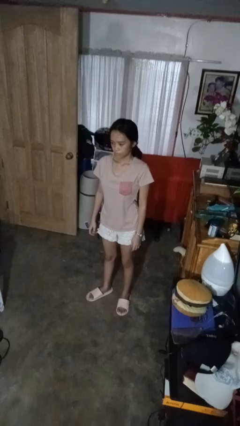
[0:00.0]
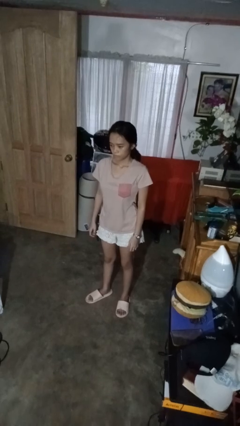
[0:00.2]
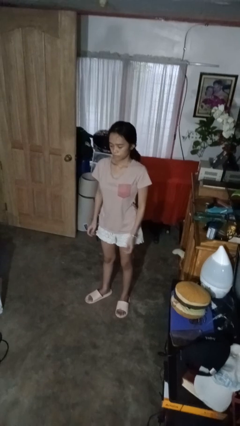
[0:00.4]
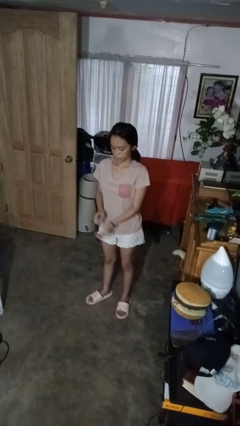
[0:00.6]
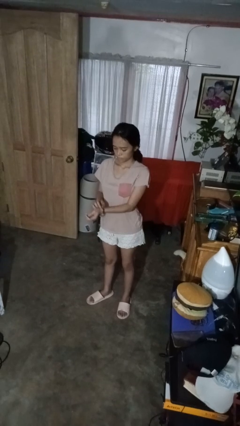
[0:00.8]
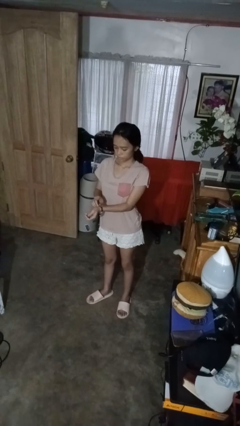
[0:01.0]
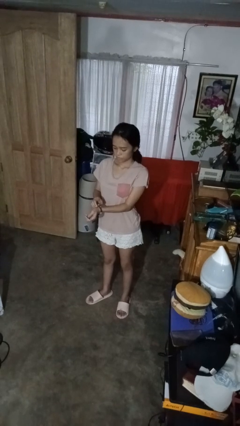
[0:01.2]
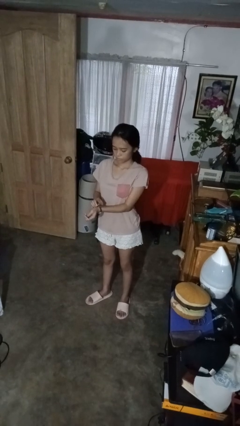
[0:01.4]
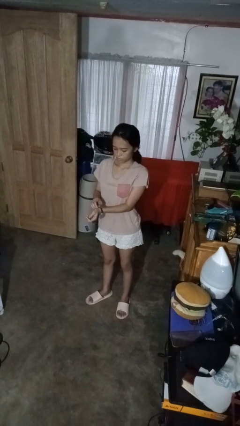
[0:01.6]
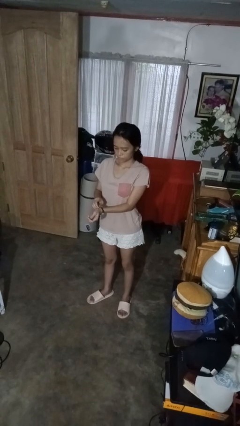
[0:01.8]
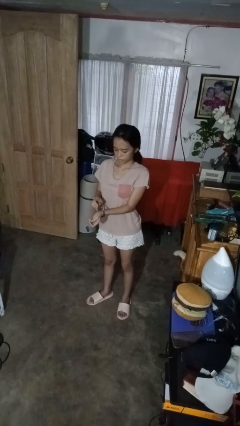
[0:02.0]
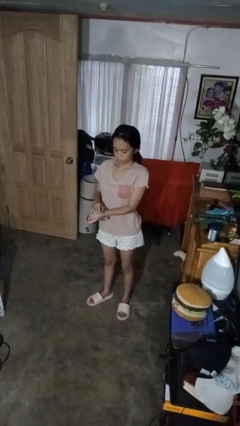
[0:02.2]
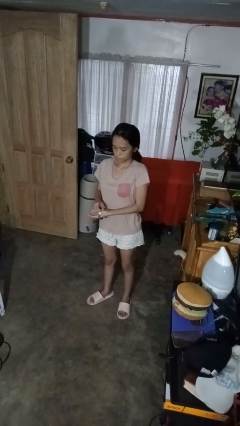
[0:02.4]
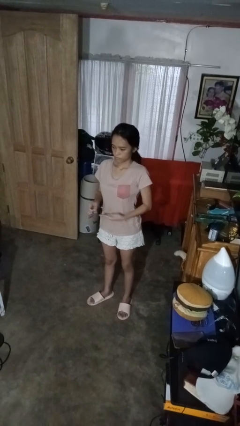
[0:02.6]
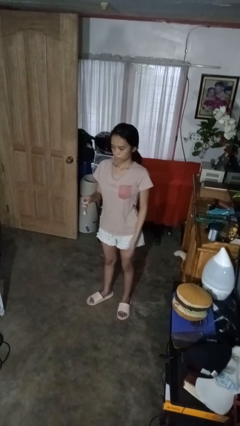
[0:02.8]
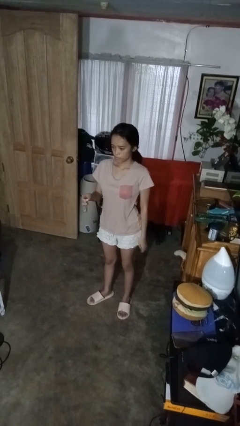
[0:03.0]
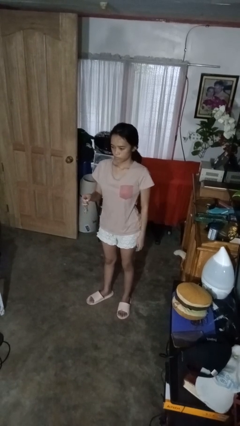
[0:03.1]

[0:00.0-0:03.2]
person takes off wristwatch

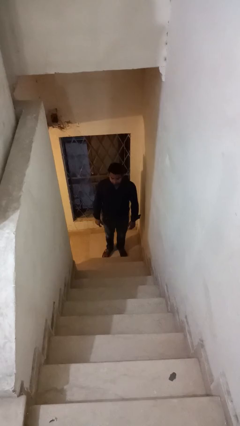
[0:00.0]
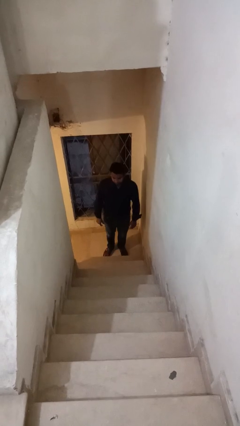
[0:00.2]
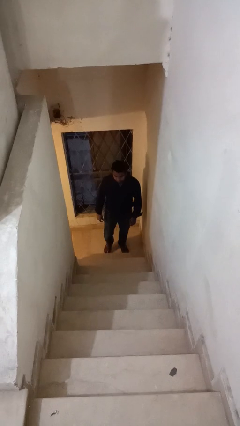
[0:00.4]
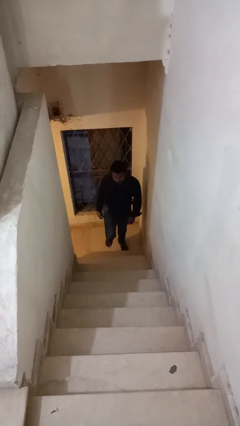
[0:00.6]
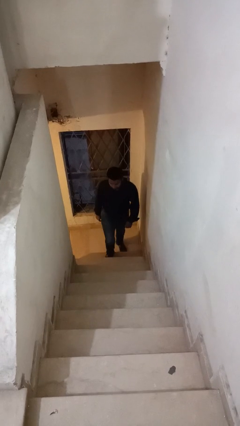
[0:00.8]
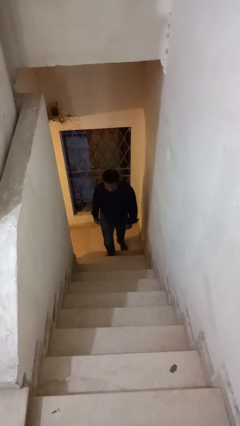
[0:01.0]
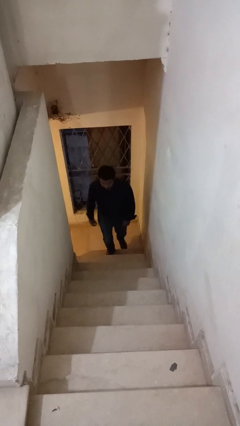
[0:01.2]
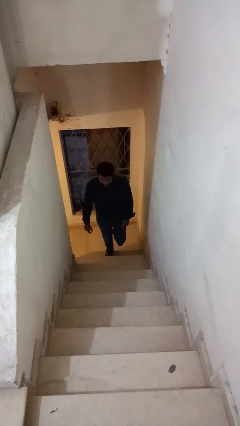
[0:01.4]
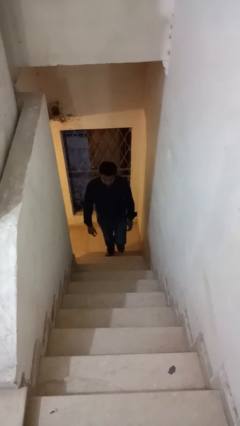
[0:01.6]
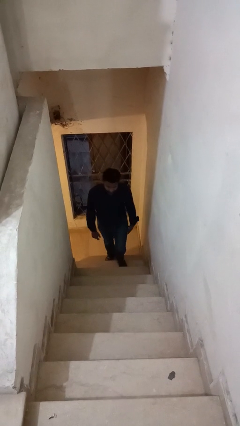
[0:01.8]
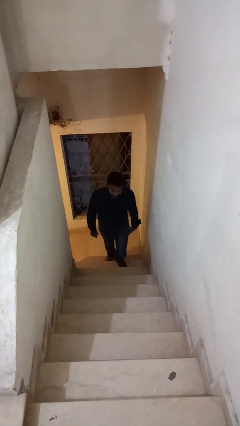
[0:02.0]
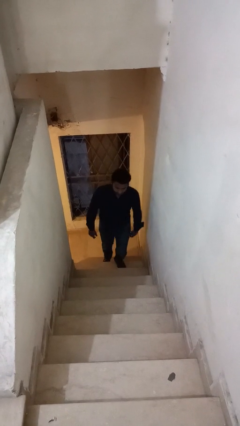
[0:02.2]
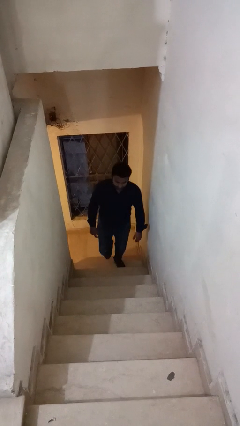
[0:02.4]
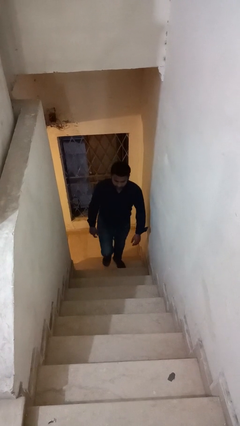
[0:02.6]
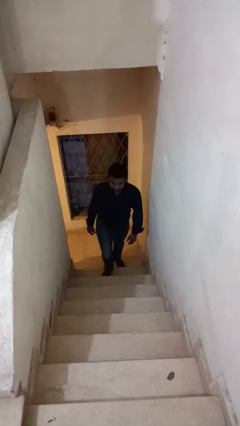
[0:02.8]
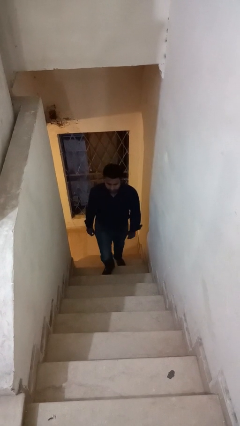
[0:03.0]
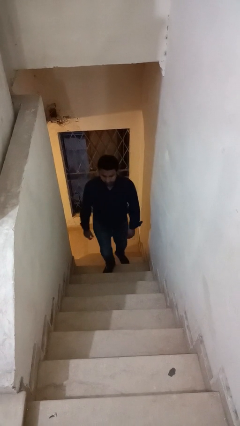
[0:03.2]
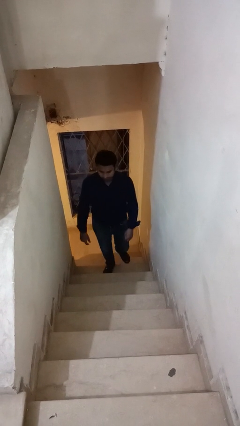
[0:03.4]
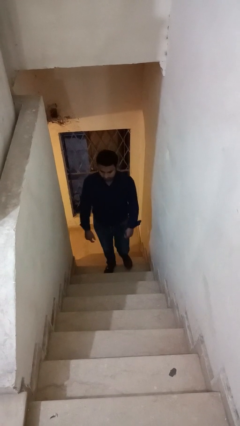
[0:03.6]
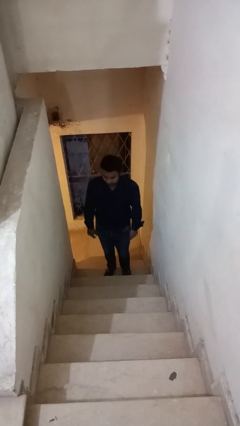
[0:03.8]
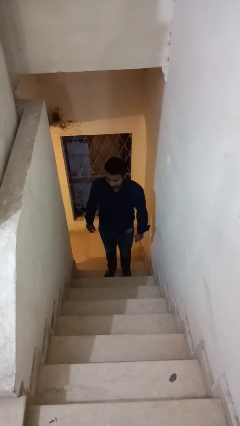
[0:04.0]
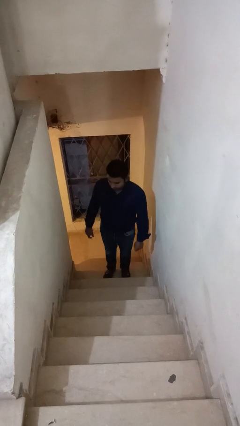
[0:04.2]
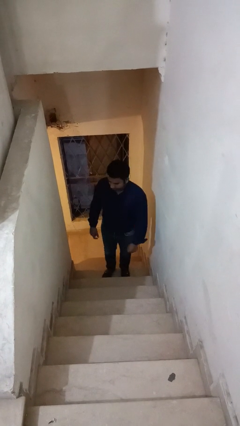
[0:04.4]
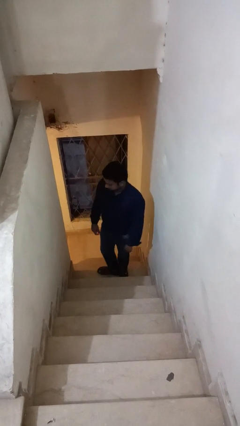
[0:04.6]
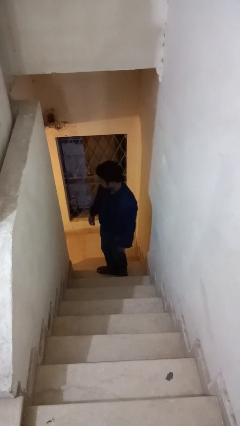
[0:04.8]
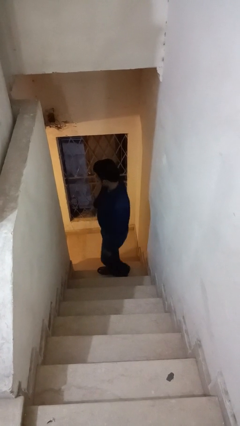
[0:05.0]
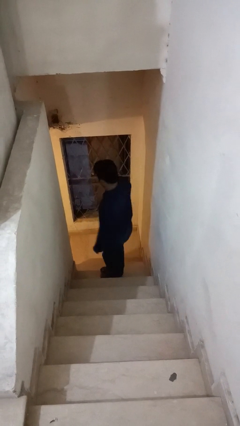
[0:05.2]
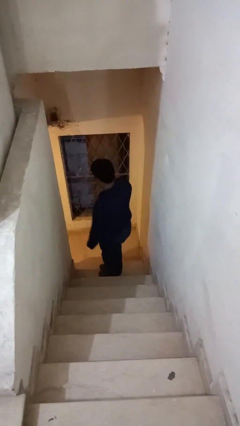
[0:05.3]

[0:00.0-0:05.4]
person climbs up stairs

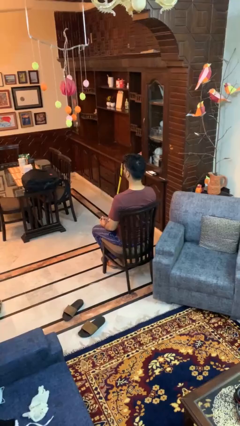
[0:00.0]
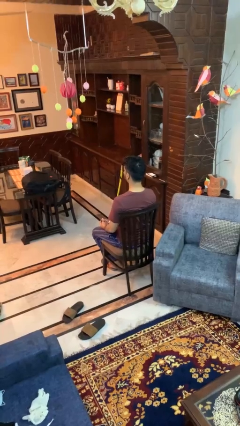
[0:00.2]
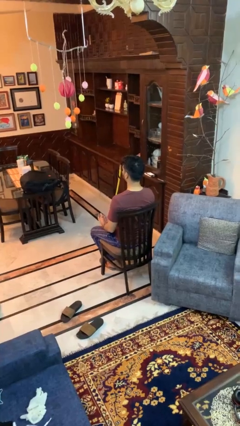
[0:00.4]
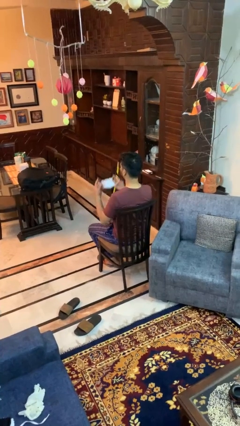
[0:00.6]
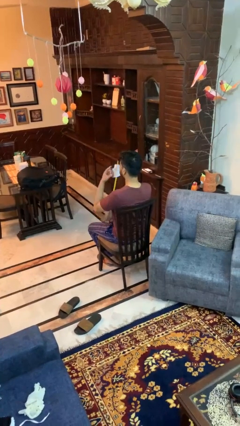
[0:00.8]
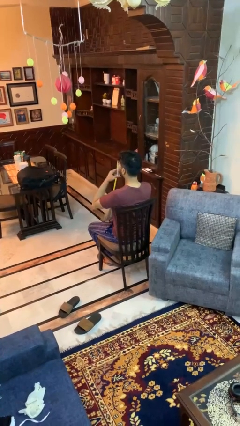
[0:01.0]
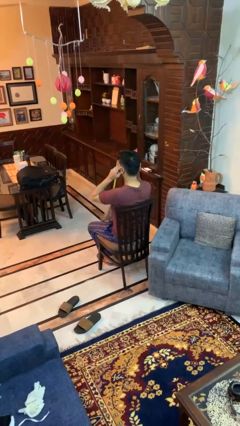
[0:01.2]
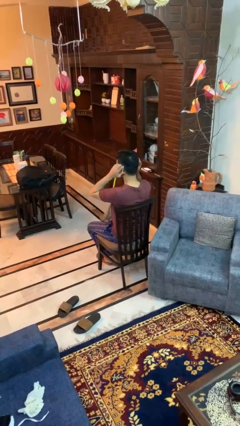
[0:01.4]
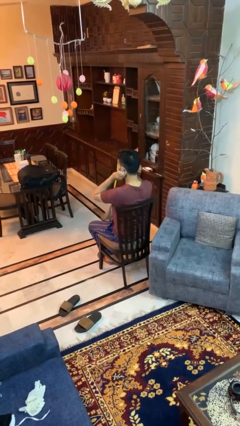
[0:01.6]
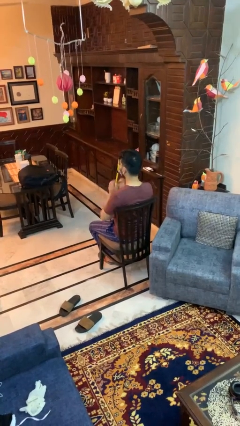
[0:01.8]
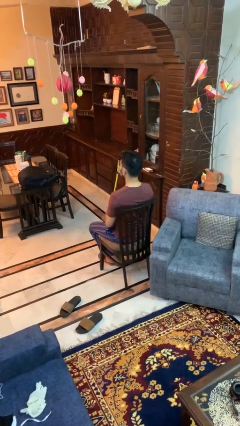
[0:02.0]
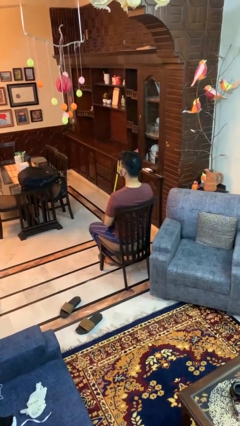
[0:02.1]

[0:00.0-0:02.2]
person puts on facemask

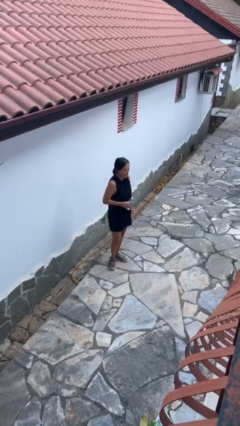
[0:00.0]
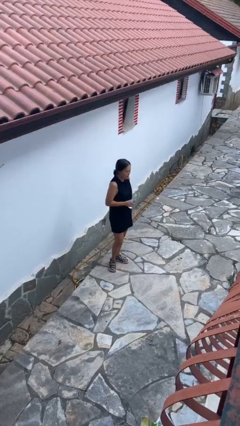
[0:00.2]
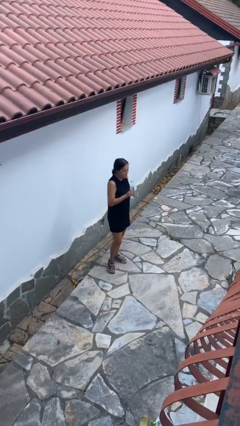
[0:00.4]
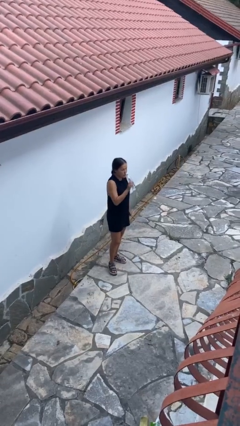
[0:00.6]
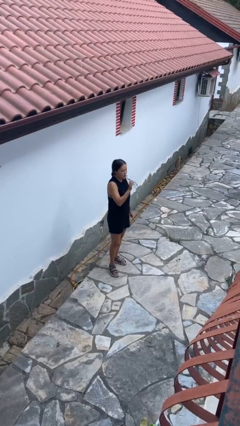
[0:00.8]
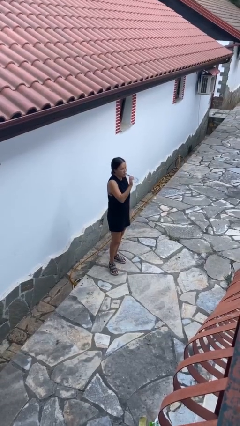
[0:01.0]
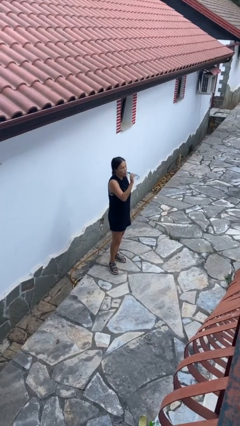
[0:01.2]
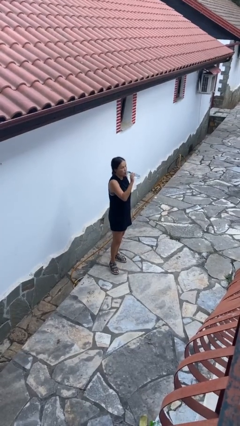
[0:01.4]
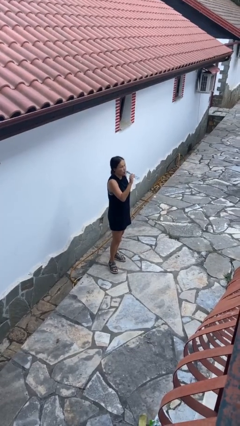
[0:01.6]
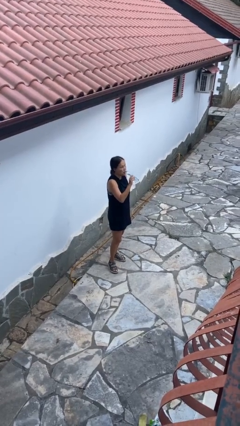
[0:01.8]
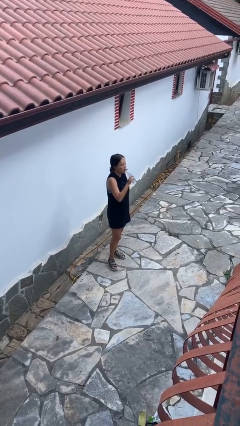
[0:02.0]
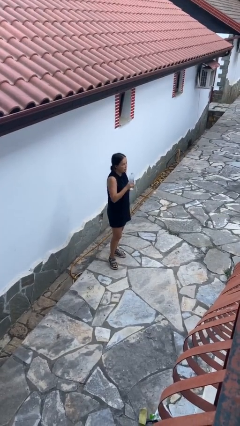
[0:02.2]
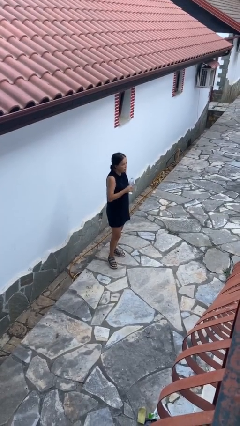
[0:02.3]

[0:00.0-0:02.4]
person drinks from bottle

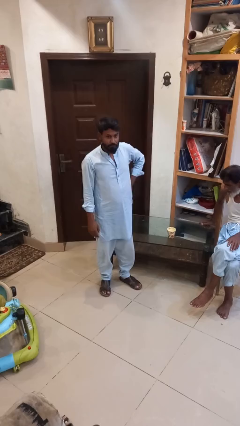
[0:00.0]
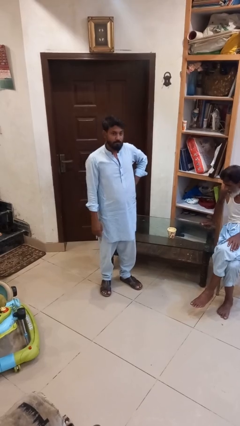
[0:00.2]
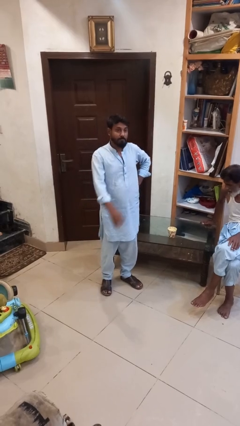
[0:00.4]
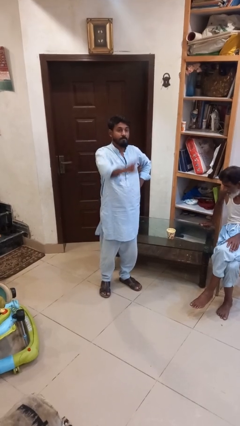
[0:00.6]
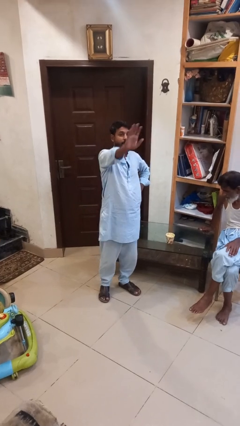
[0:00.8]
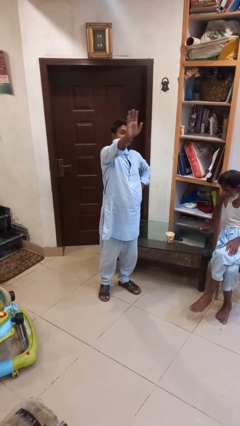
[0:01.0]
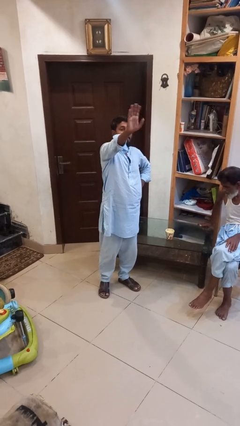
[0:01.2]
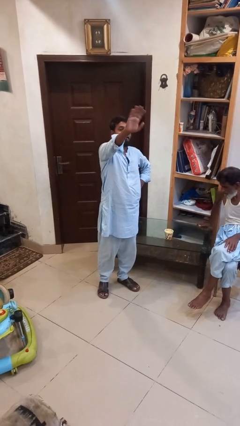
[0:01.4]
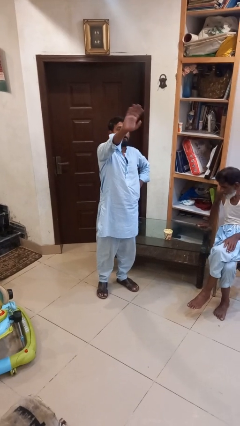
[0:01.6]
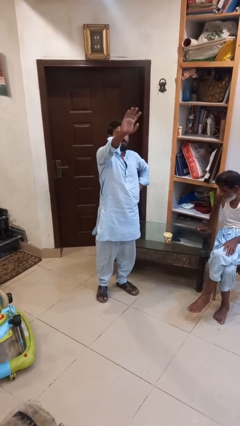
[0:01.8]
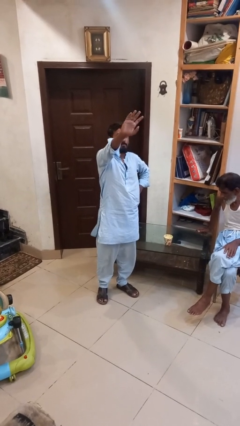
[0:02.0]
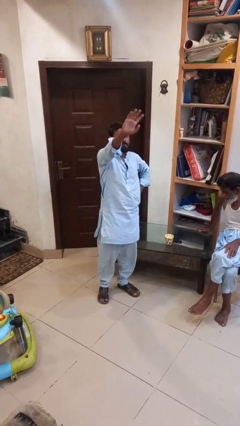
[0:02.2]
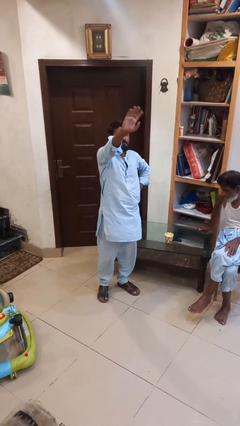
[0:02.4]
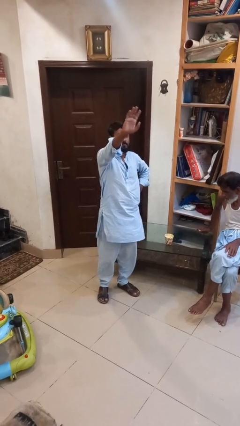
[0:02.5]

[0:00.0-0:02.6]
person waves at person

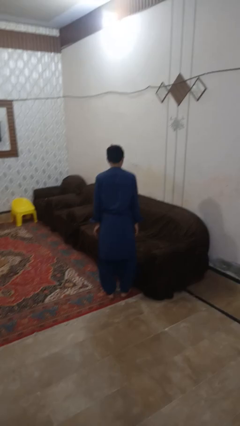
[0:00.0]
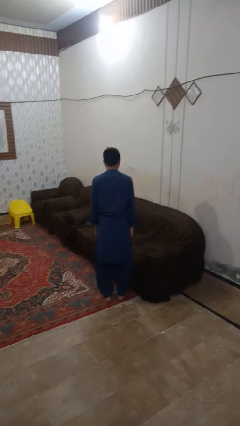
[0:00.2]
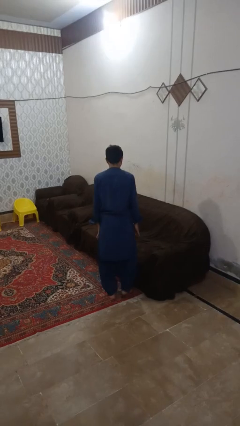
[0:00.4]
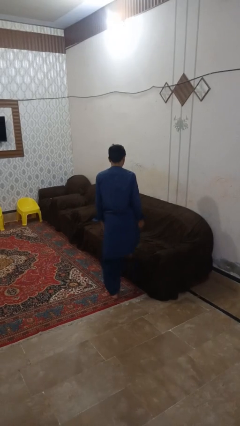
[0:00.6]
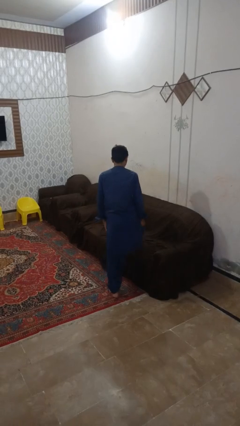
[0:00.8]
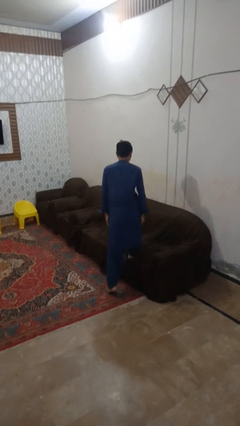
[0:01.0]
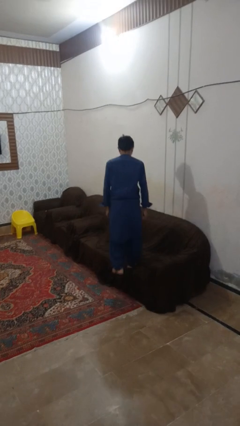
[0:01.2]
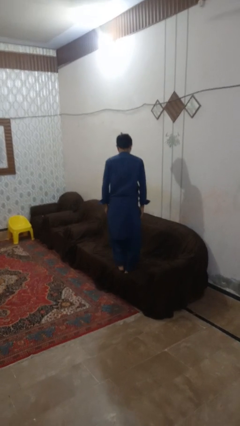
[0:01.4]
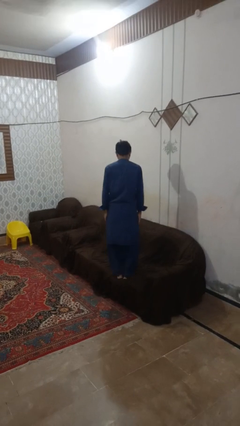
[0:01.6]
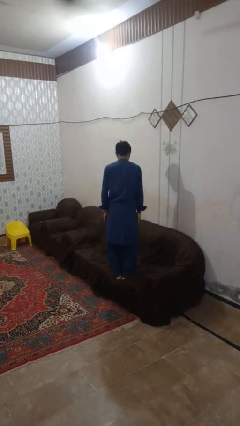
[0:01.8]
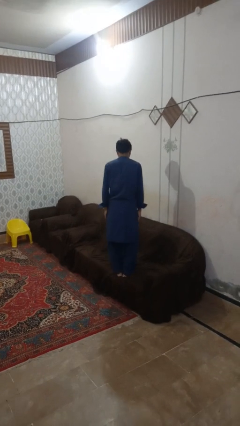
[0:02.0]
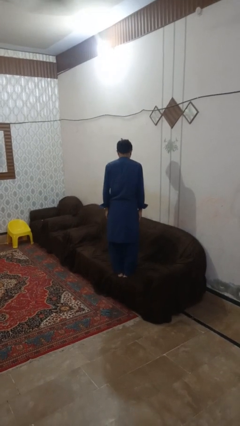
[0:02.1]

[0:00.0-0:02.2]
person climbs on couch
